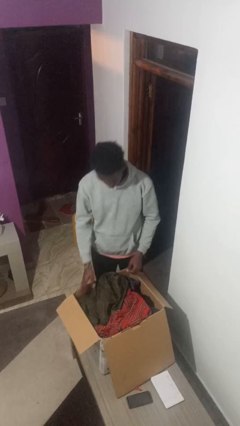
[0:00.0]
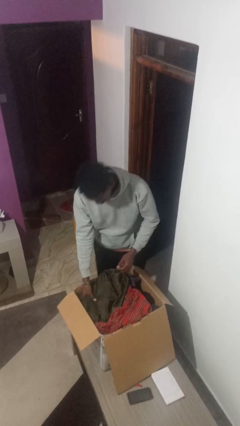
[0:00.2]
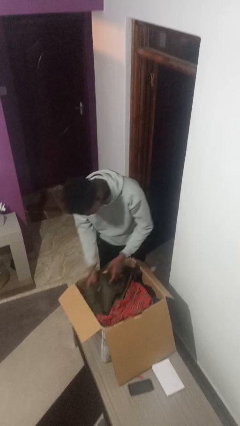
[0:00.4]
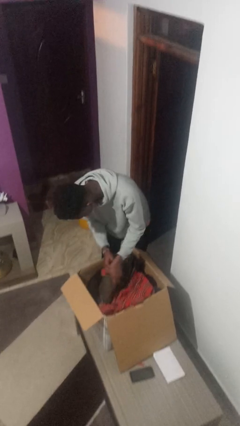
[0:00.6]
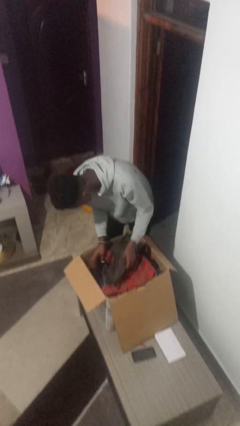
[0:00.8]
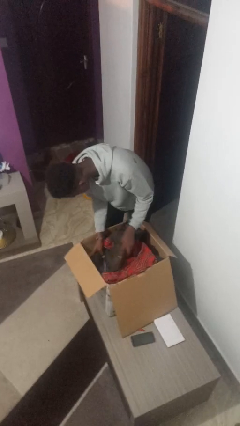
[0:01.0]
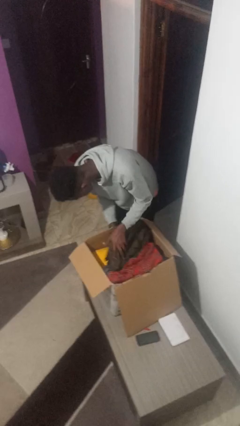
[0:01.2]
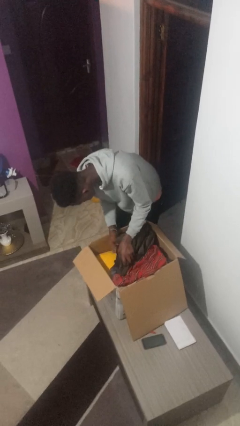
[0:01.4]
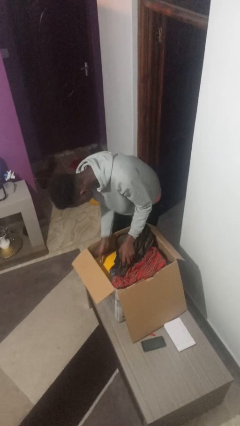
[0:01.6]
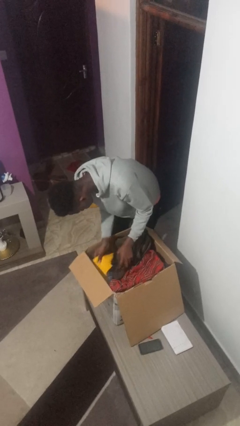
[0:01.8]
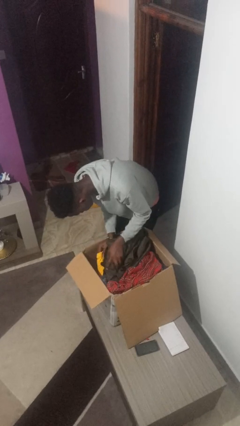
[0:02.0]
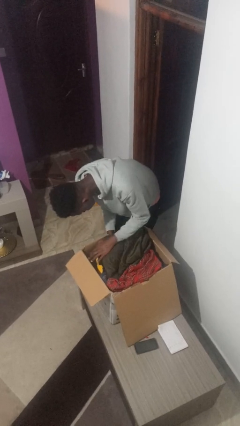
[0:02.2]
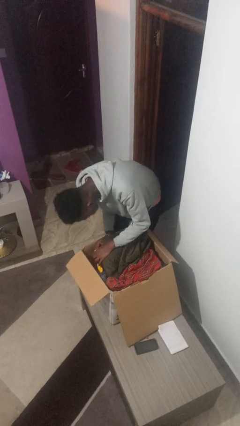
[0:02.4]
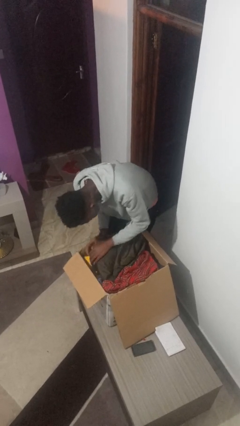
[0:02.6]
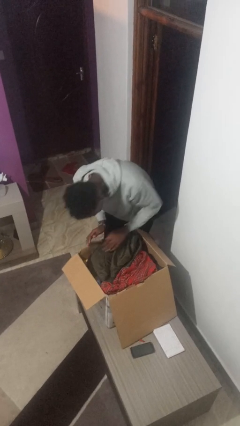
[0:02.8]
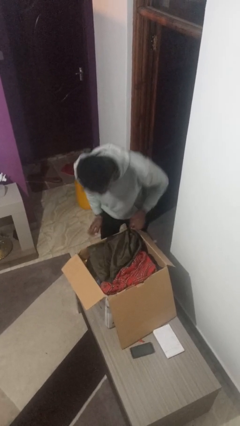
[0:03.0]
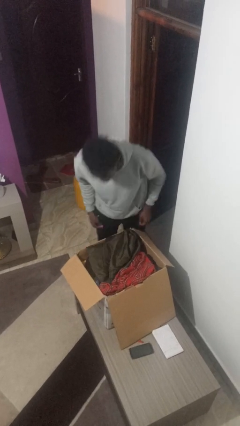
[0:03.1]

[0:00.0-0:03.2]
person searches in box

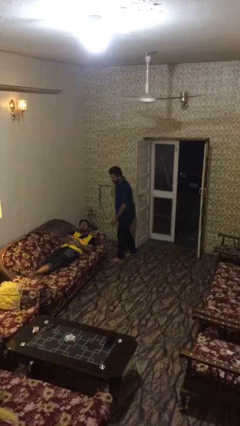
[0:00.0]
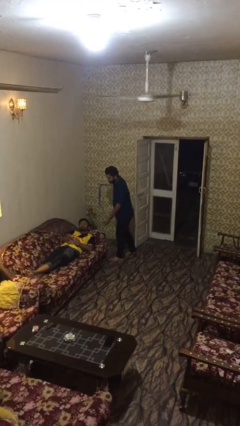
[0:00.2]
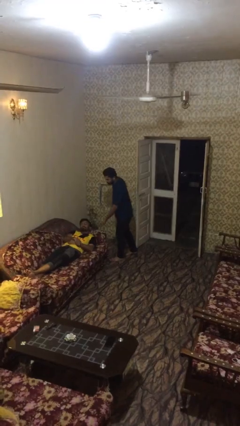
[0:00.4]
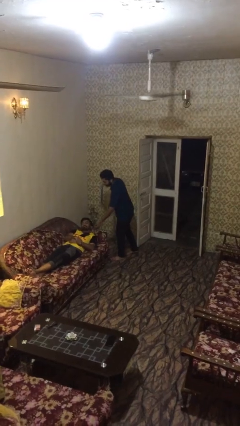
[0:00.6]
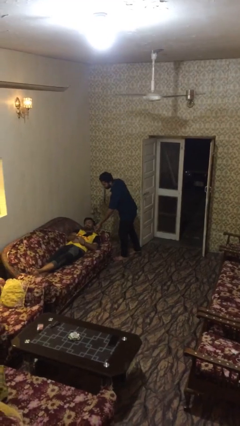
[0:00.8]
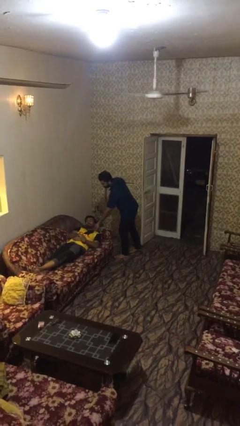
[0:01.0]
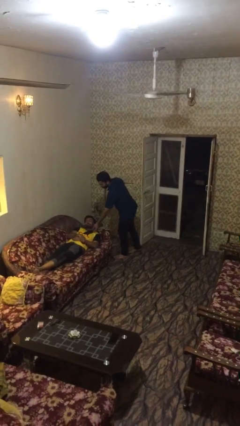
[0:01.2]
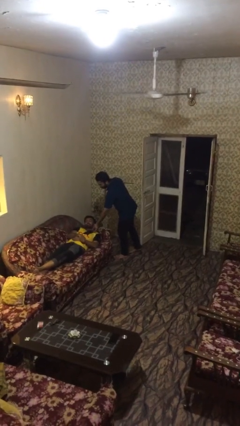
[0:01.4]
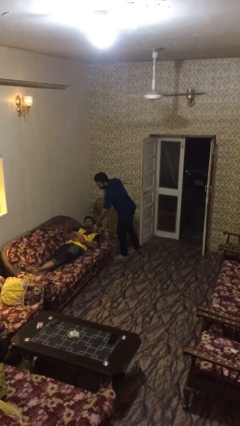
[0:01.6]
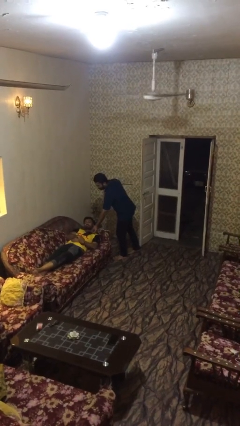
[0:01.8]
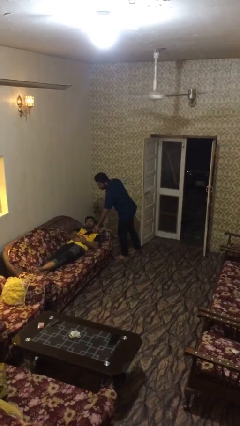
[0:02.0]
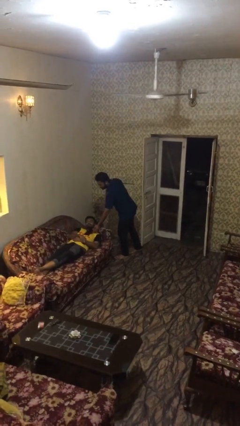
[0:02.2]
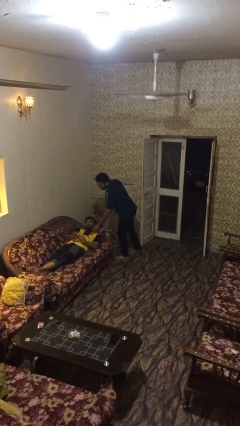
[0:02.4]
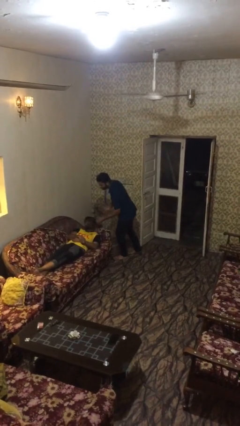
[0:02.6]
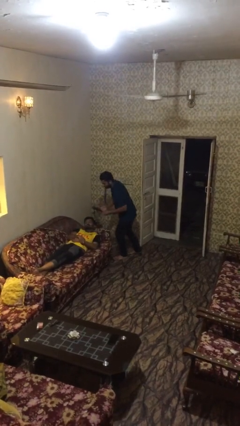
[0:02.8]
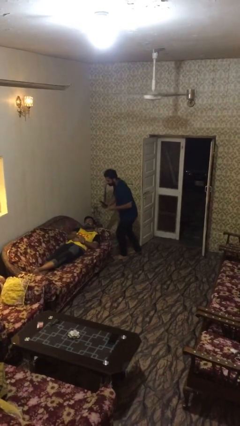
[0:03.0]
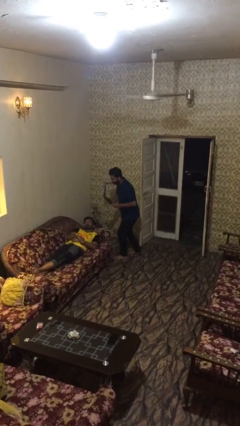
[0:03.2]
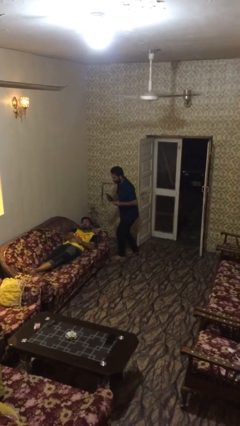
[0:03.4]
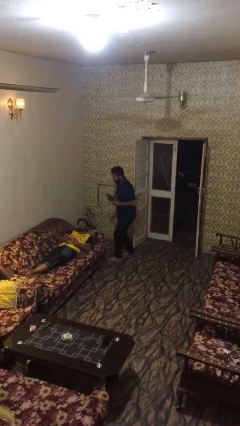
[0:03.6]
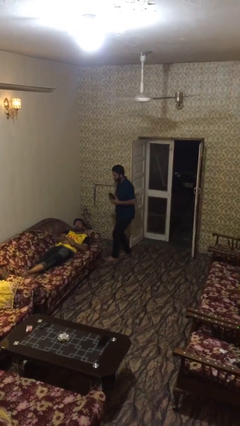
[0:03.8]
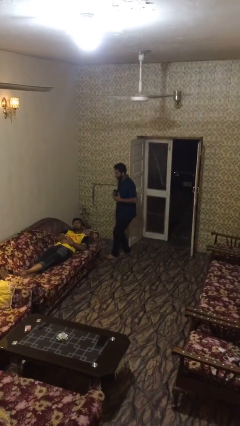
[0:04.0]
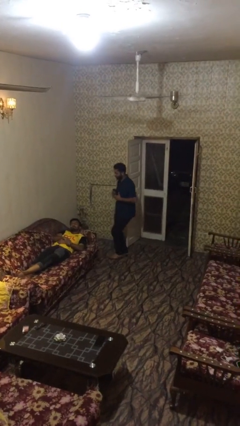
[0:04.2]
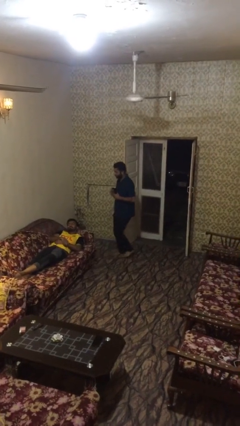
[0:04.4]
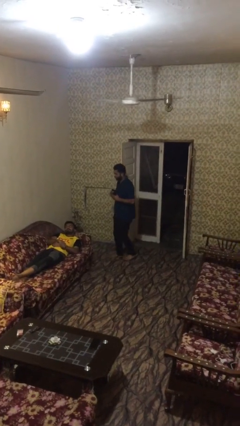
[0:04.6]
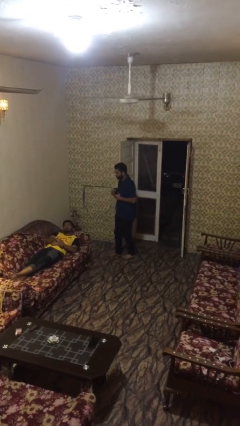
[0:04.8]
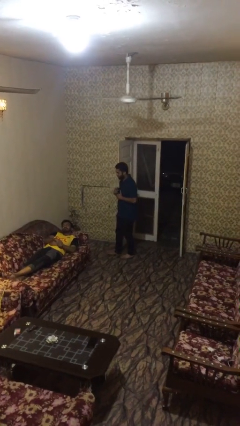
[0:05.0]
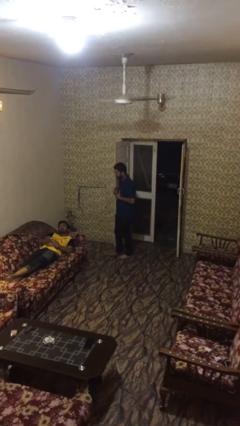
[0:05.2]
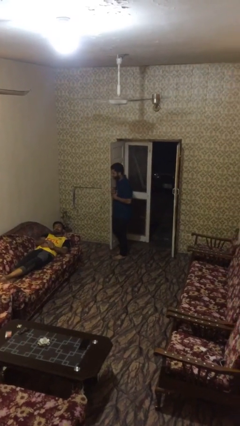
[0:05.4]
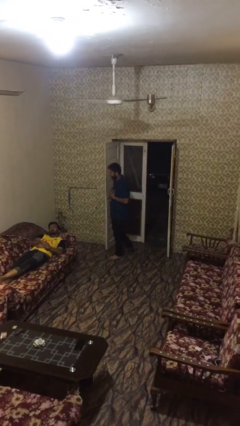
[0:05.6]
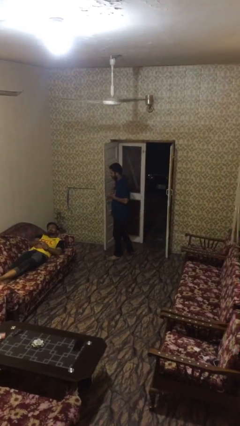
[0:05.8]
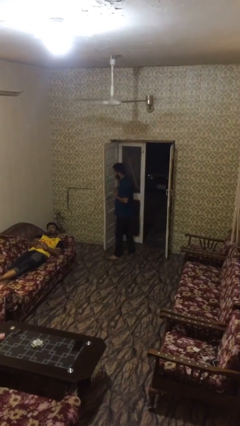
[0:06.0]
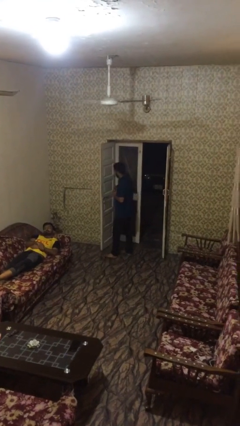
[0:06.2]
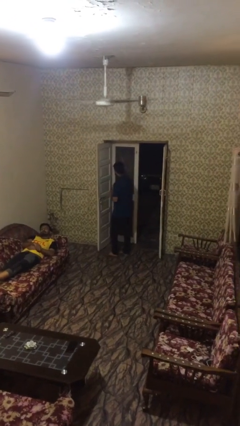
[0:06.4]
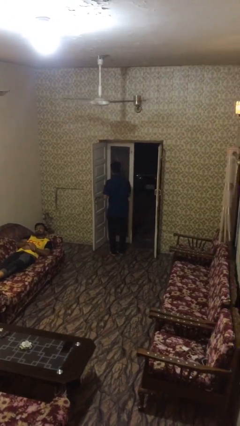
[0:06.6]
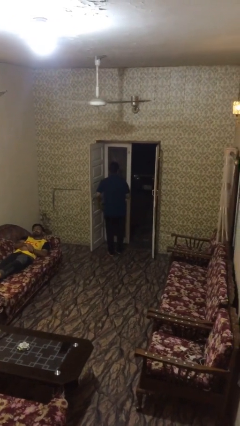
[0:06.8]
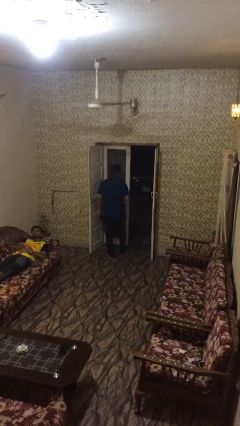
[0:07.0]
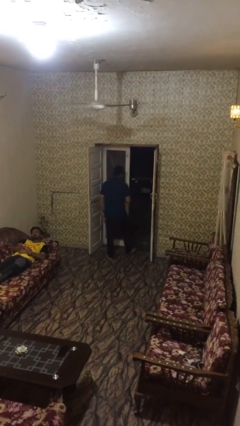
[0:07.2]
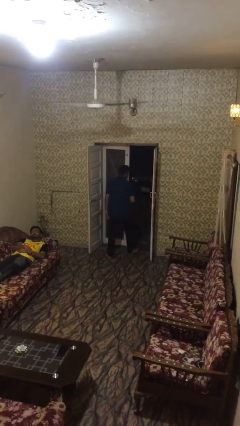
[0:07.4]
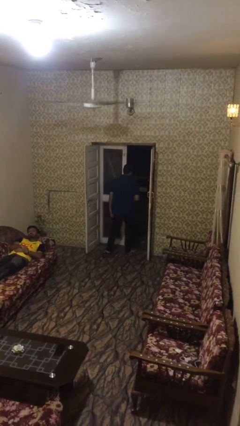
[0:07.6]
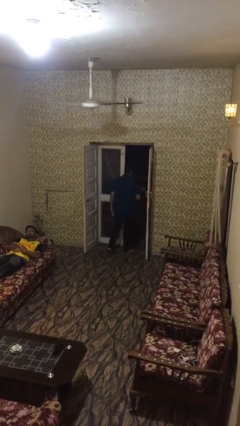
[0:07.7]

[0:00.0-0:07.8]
person steals object from person

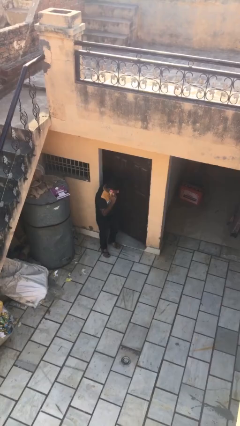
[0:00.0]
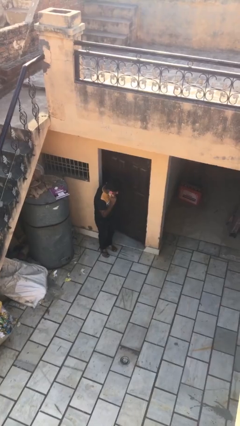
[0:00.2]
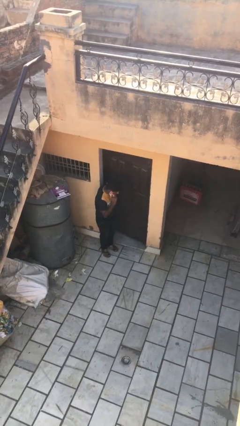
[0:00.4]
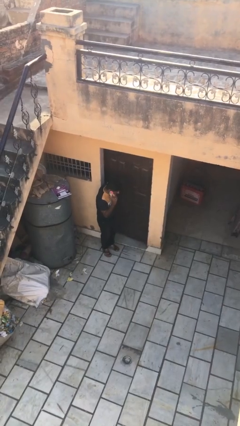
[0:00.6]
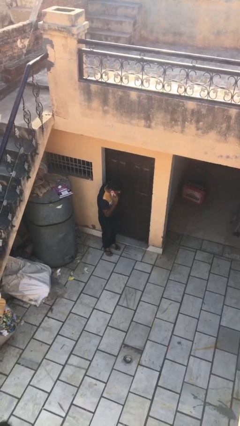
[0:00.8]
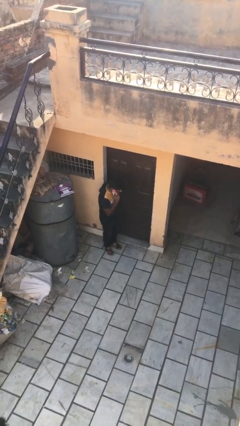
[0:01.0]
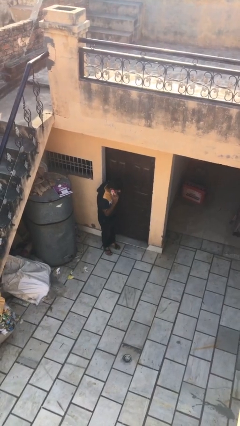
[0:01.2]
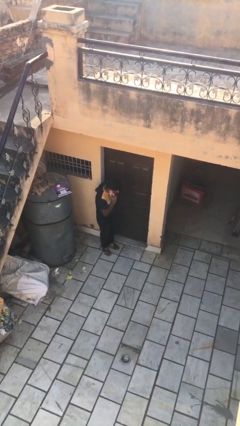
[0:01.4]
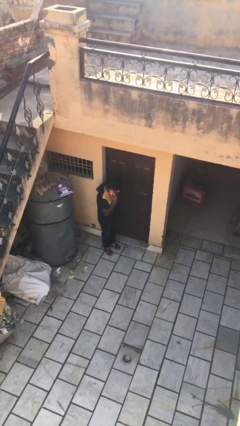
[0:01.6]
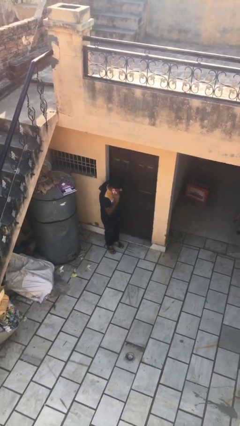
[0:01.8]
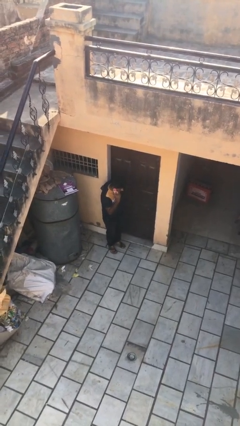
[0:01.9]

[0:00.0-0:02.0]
person closes facility door

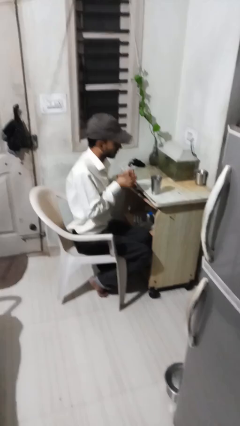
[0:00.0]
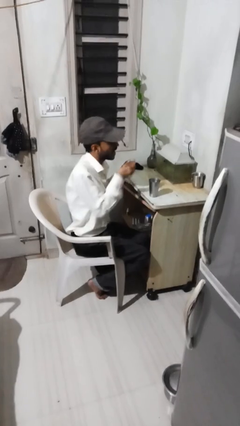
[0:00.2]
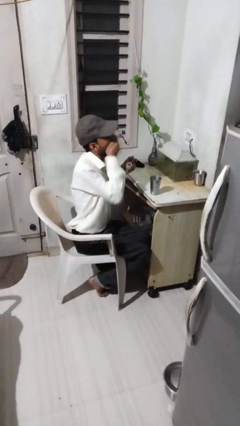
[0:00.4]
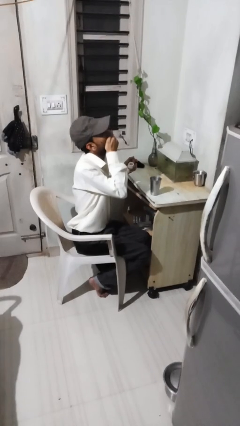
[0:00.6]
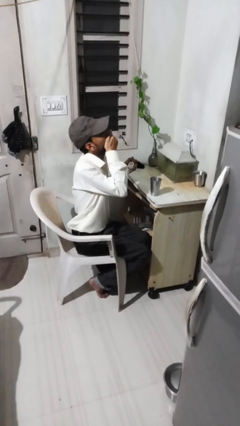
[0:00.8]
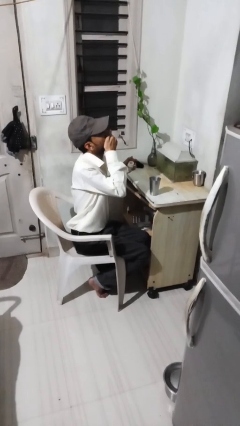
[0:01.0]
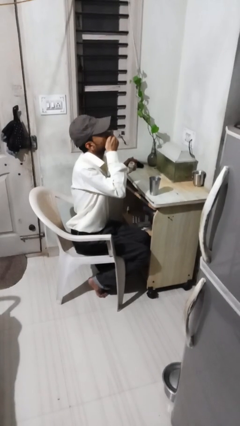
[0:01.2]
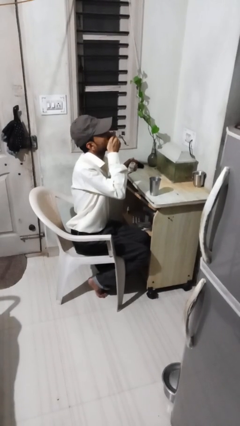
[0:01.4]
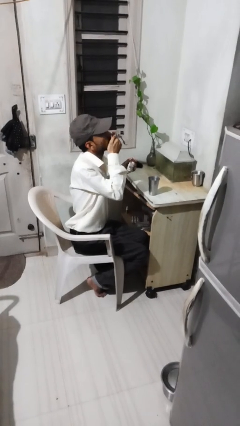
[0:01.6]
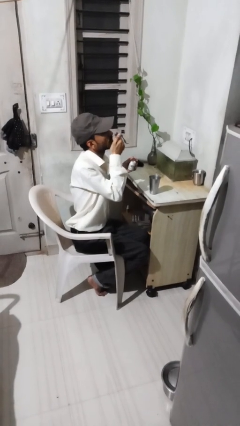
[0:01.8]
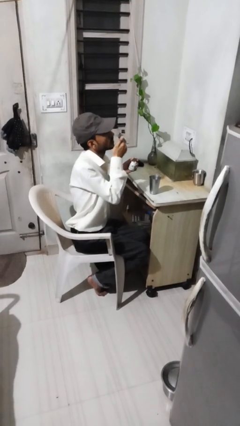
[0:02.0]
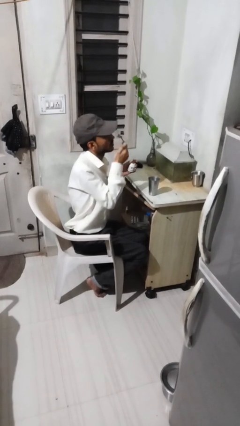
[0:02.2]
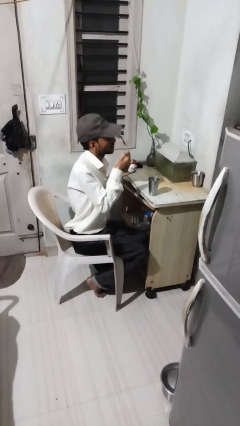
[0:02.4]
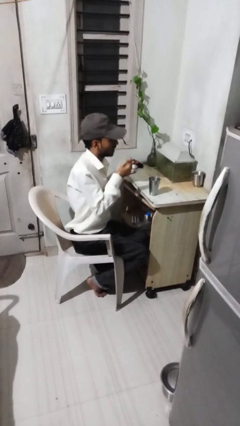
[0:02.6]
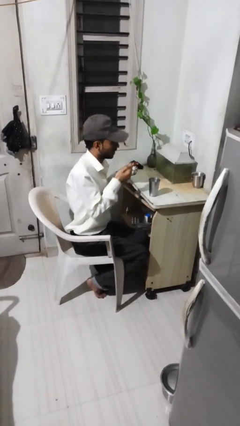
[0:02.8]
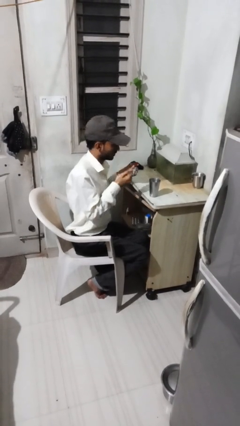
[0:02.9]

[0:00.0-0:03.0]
person takes medicine pills

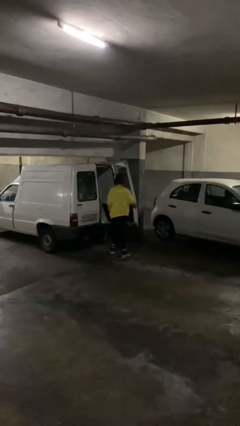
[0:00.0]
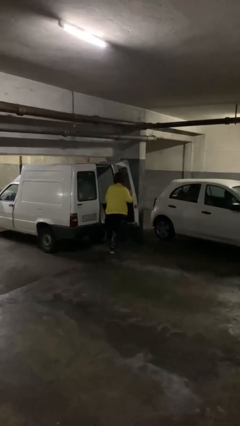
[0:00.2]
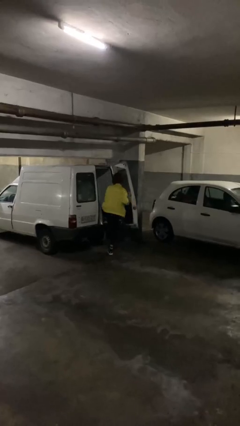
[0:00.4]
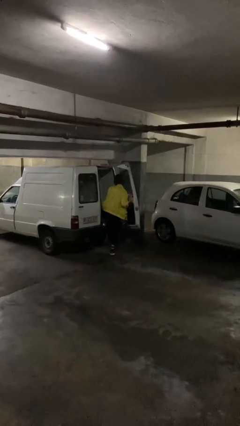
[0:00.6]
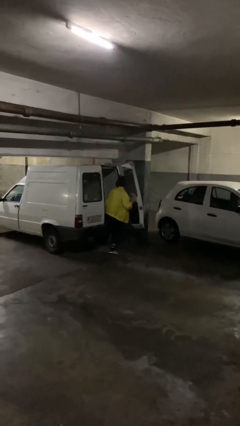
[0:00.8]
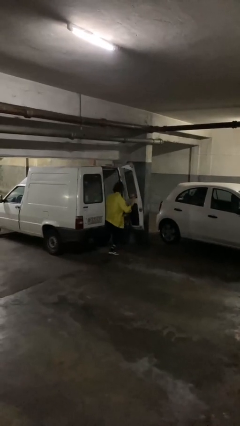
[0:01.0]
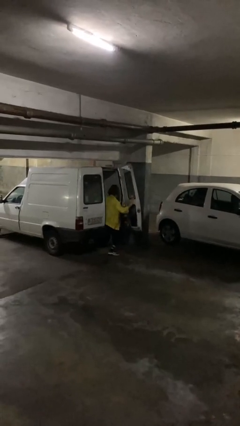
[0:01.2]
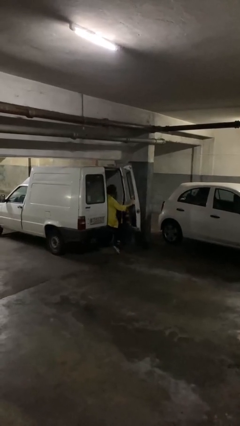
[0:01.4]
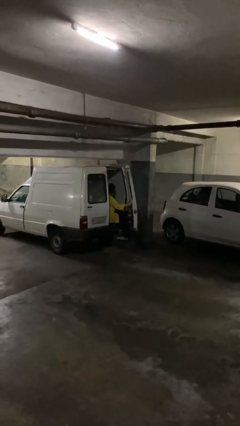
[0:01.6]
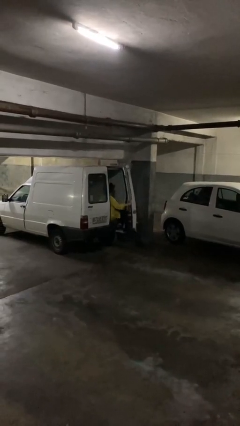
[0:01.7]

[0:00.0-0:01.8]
person enters car
